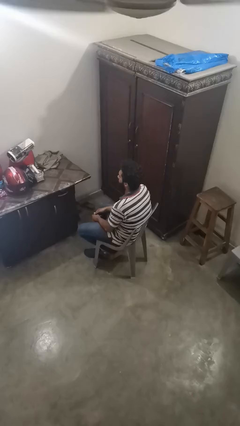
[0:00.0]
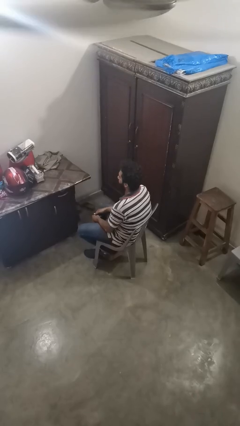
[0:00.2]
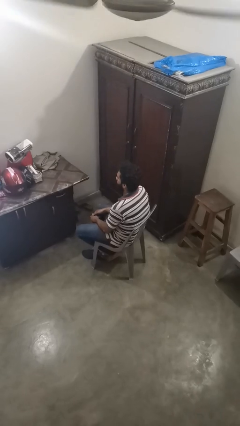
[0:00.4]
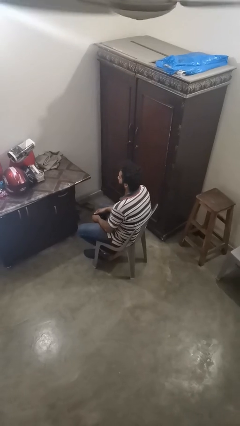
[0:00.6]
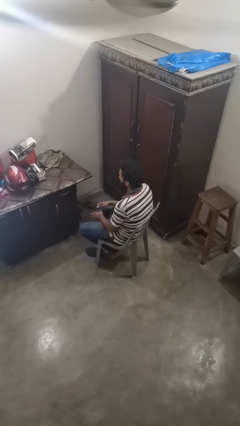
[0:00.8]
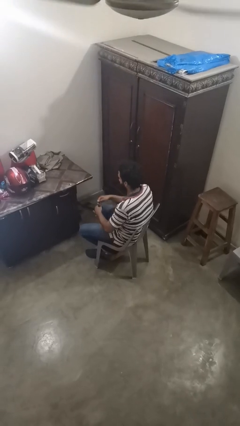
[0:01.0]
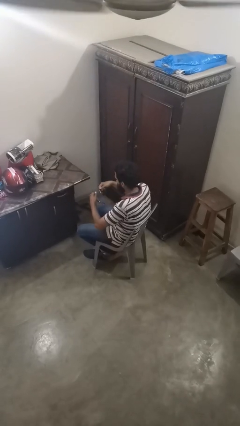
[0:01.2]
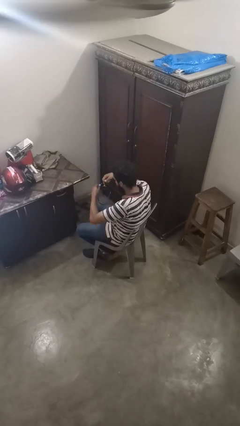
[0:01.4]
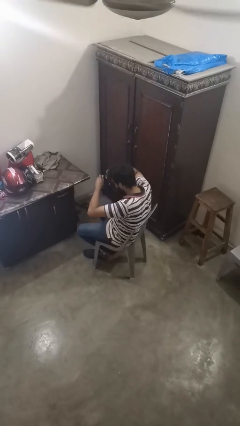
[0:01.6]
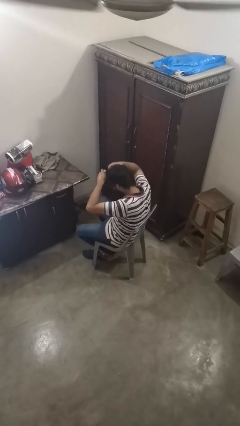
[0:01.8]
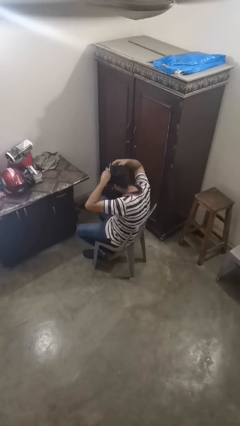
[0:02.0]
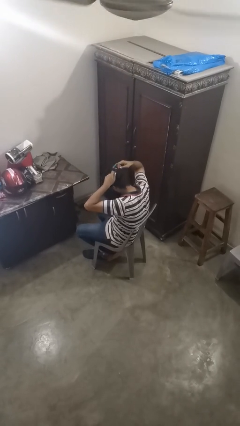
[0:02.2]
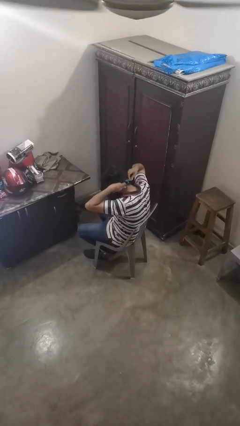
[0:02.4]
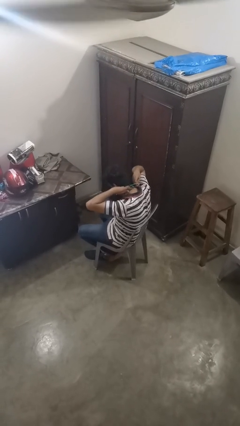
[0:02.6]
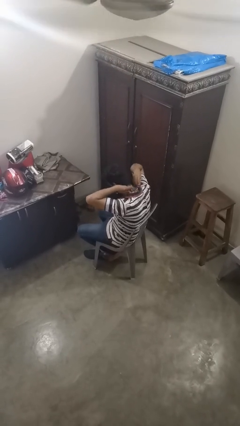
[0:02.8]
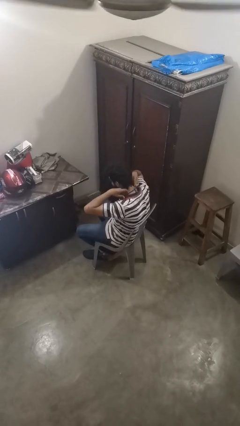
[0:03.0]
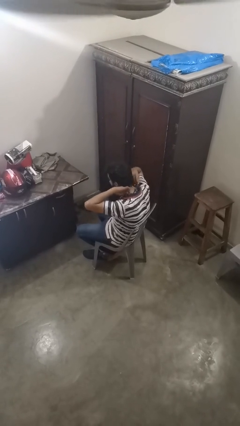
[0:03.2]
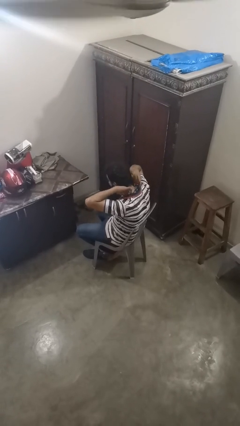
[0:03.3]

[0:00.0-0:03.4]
person puts on necklace

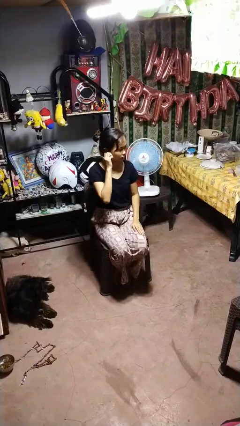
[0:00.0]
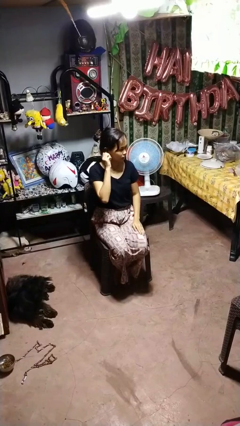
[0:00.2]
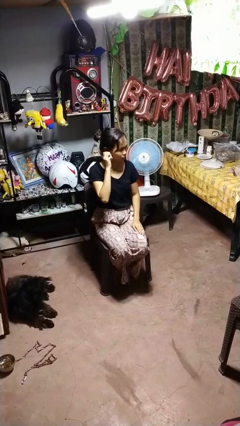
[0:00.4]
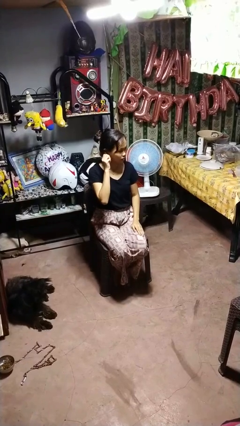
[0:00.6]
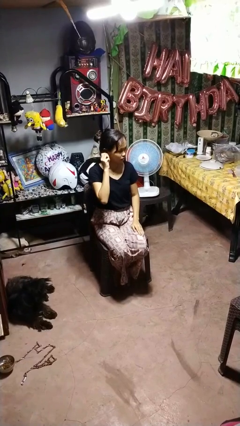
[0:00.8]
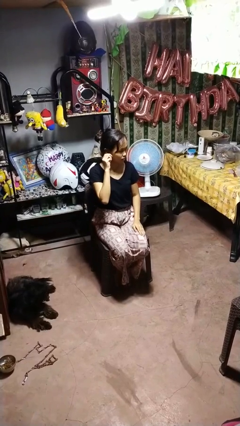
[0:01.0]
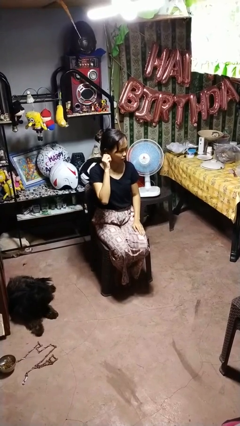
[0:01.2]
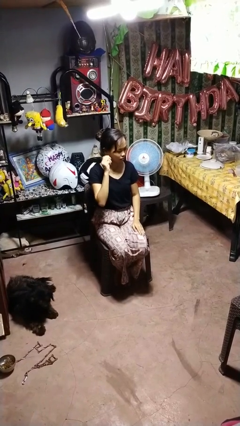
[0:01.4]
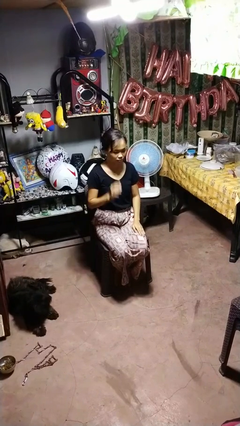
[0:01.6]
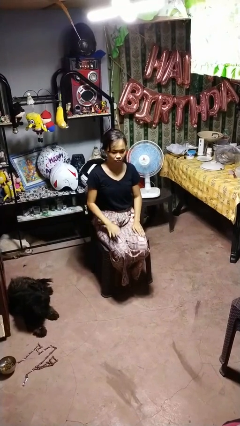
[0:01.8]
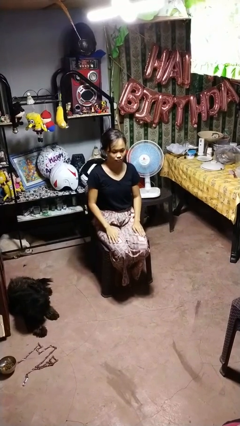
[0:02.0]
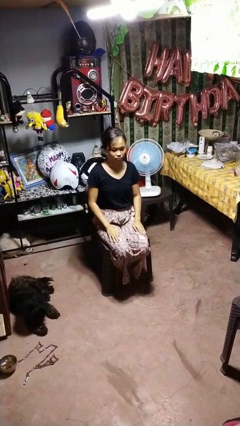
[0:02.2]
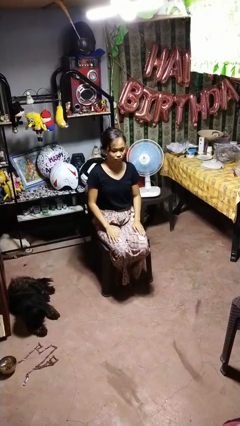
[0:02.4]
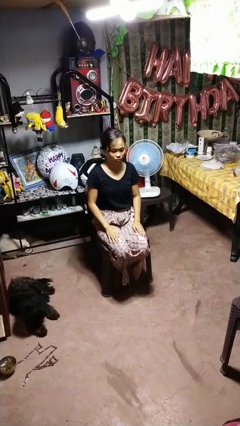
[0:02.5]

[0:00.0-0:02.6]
person touches earlobe

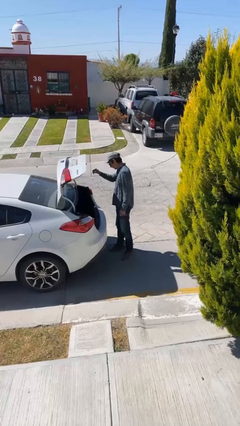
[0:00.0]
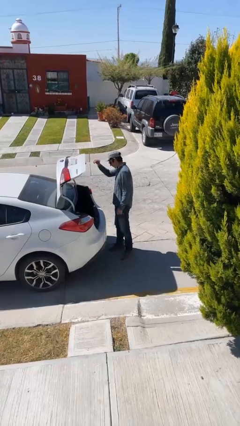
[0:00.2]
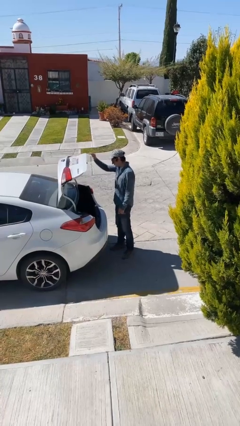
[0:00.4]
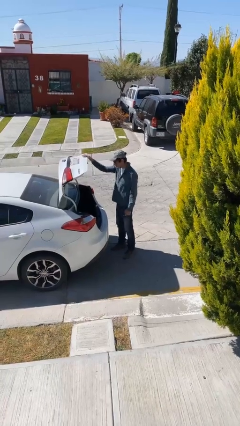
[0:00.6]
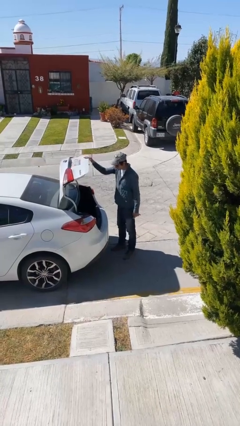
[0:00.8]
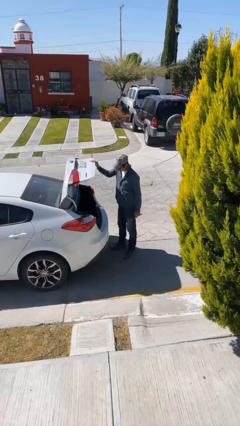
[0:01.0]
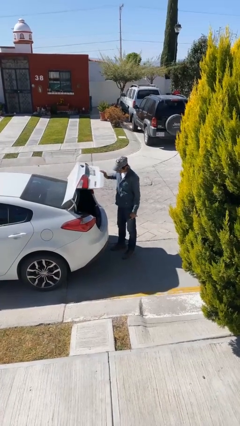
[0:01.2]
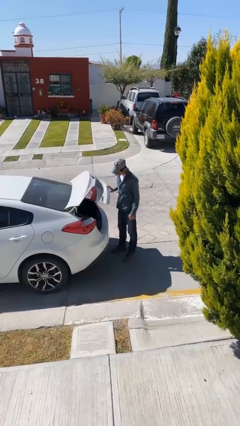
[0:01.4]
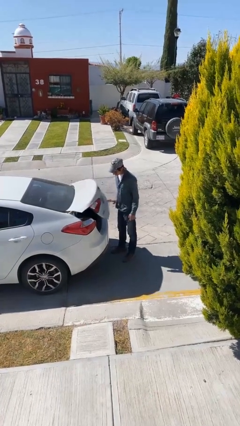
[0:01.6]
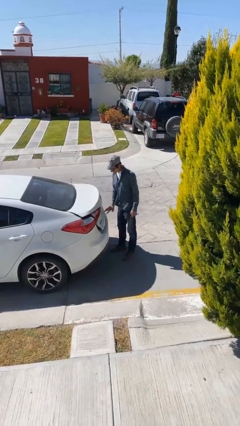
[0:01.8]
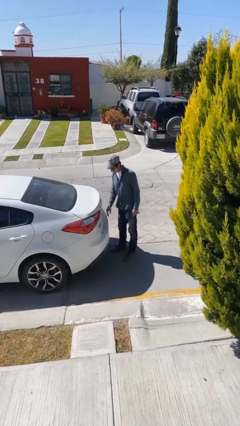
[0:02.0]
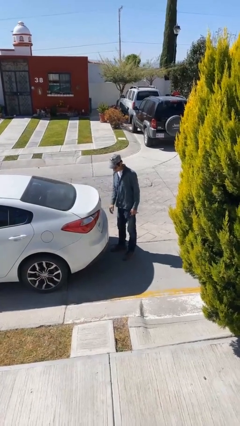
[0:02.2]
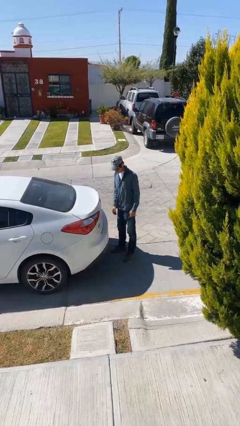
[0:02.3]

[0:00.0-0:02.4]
person closes car trunk

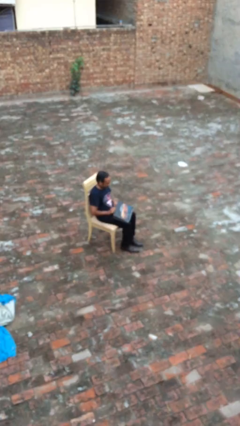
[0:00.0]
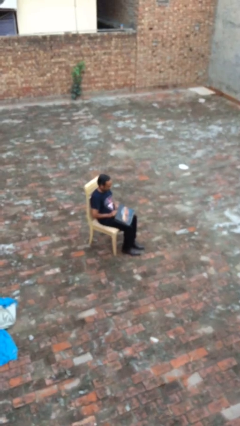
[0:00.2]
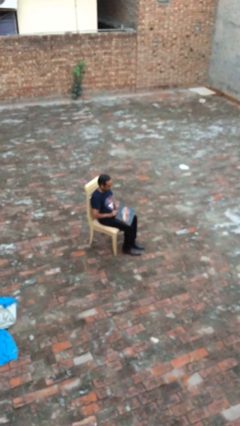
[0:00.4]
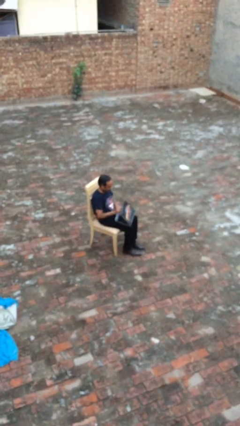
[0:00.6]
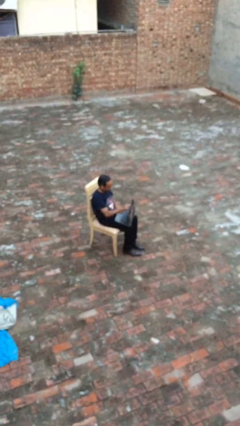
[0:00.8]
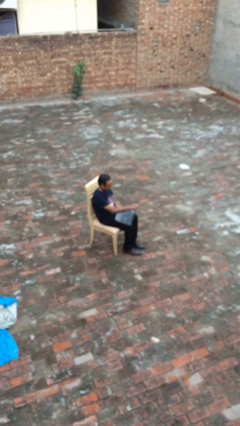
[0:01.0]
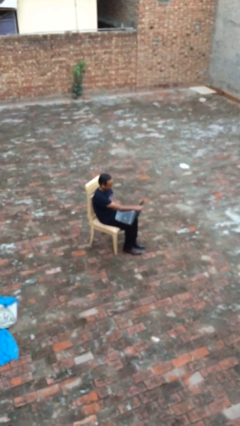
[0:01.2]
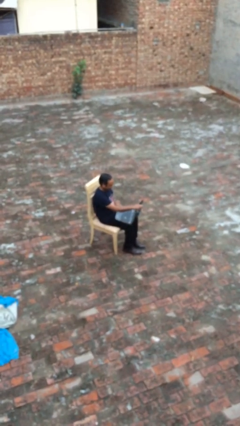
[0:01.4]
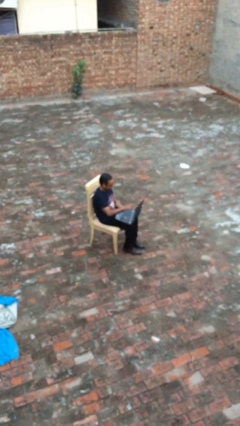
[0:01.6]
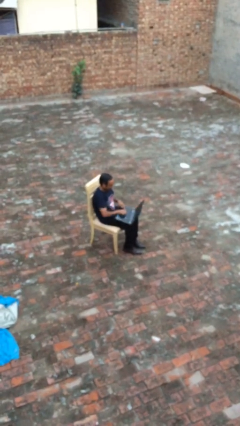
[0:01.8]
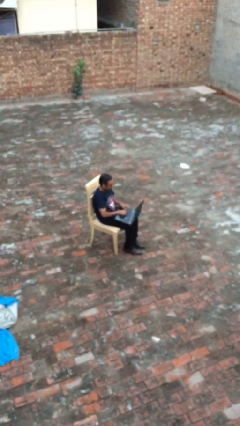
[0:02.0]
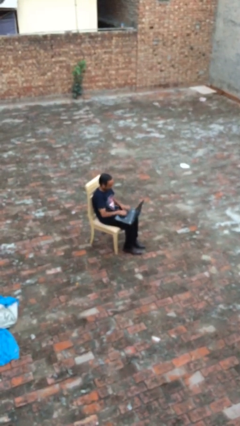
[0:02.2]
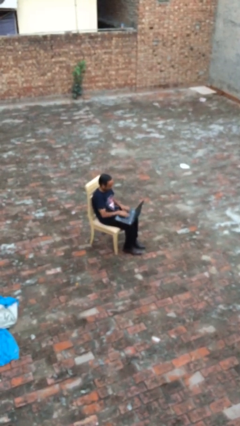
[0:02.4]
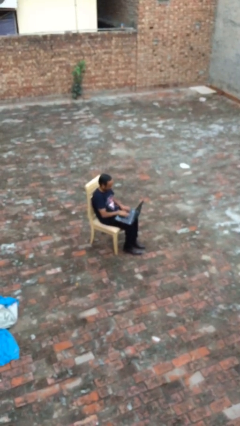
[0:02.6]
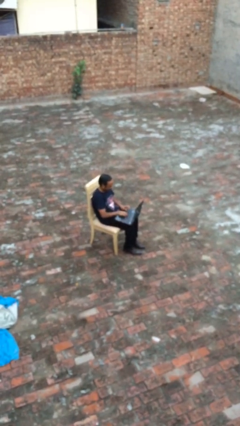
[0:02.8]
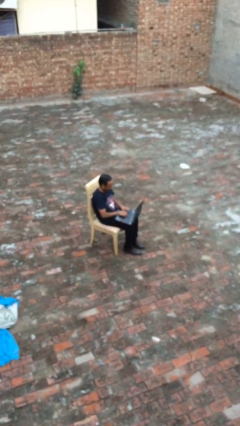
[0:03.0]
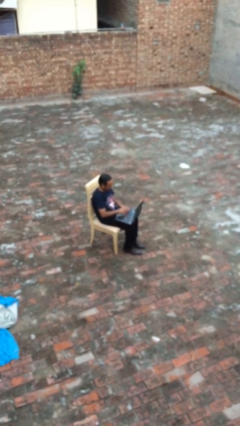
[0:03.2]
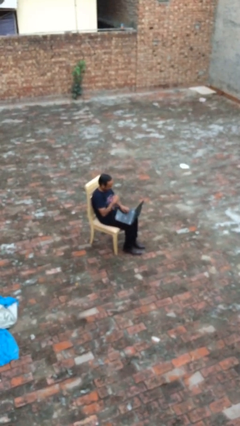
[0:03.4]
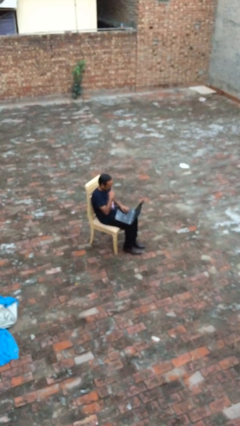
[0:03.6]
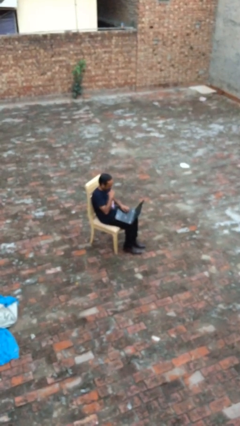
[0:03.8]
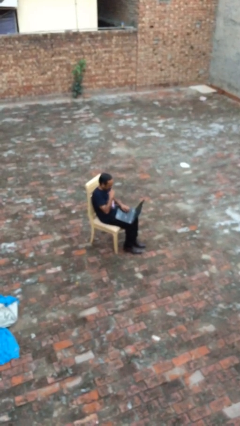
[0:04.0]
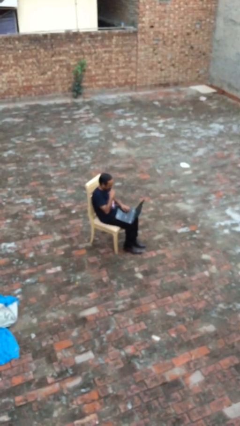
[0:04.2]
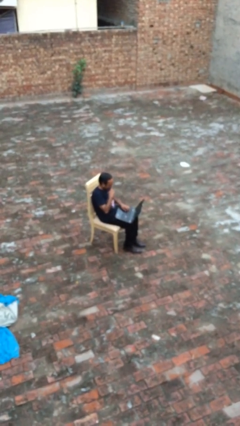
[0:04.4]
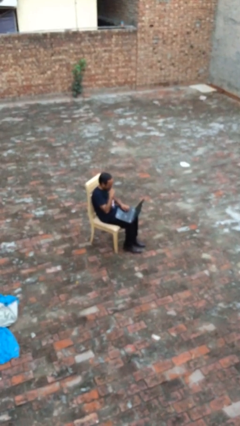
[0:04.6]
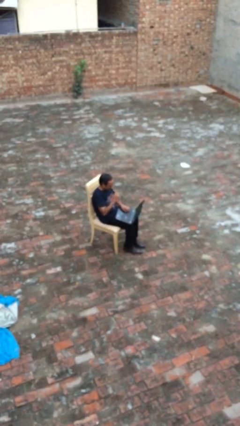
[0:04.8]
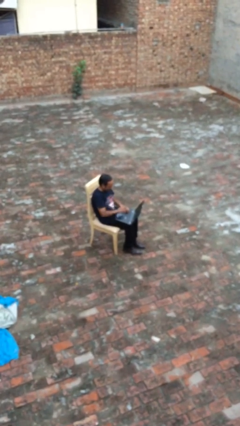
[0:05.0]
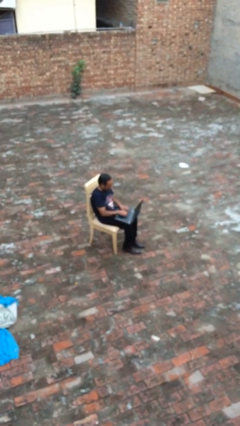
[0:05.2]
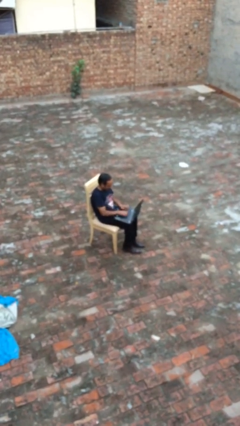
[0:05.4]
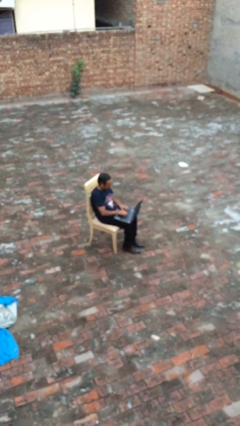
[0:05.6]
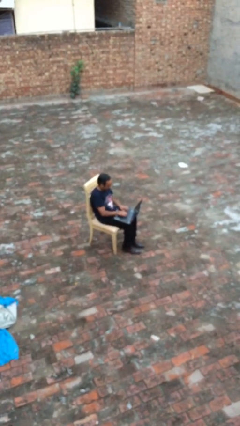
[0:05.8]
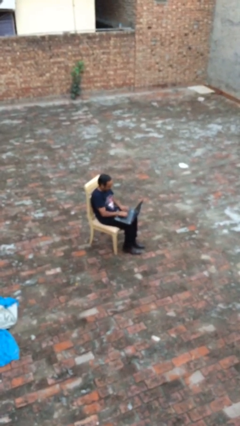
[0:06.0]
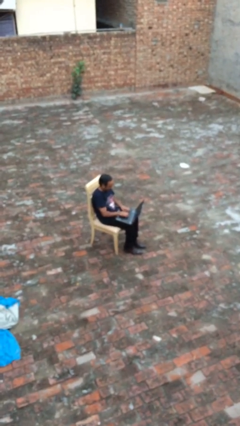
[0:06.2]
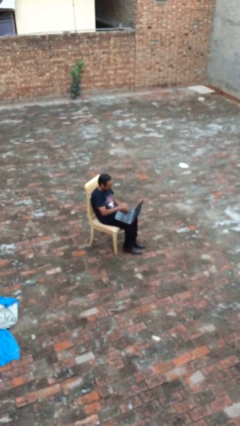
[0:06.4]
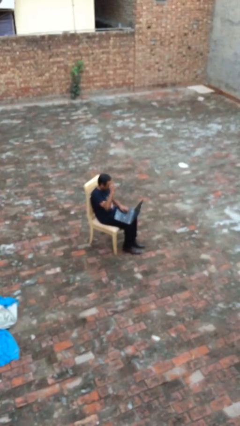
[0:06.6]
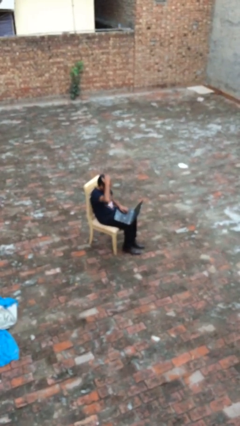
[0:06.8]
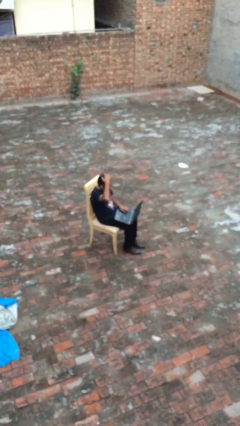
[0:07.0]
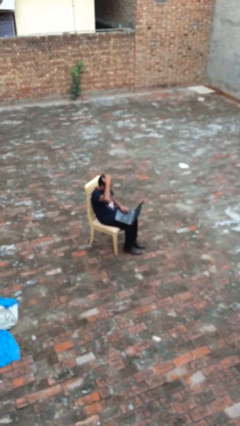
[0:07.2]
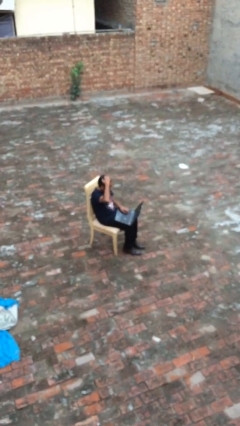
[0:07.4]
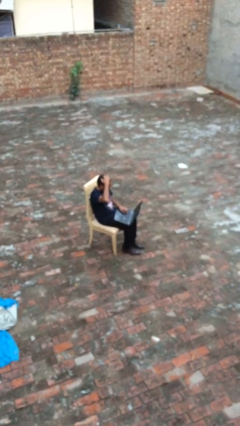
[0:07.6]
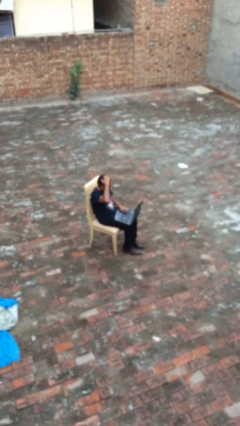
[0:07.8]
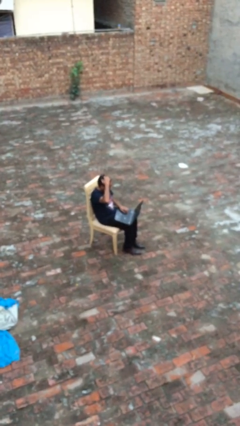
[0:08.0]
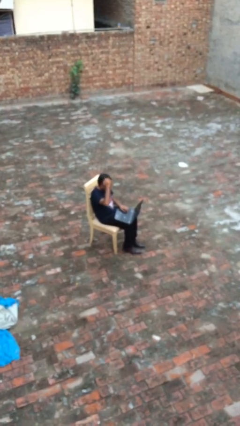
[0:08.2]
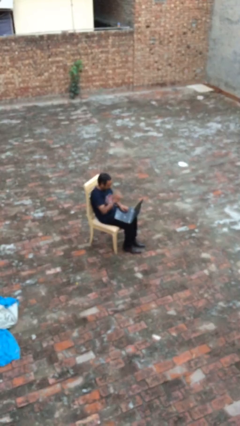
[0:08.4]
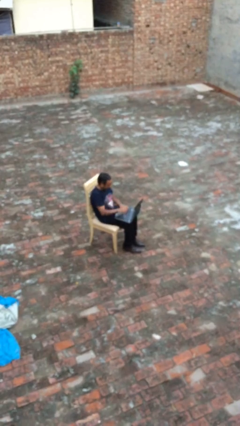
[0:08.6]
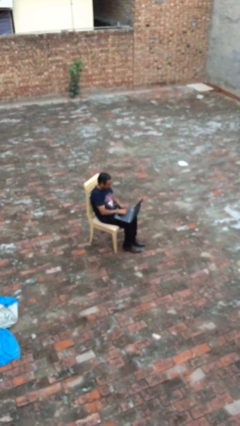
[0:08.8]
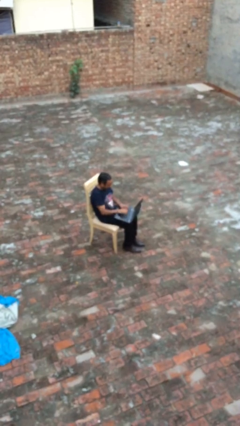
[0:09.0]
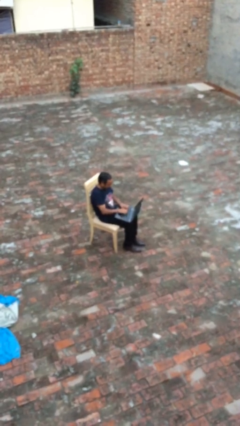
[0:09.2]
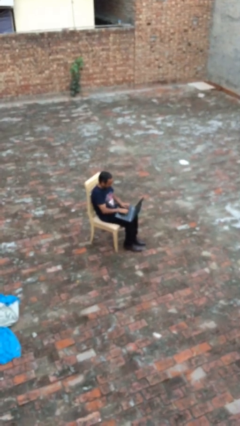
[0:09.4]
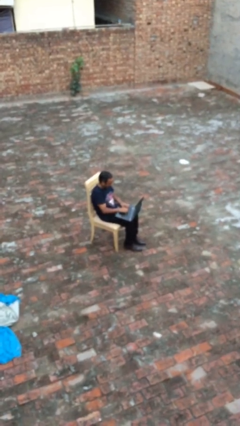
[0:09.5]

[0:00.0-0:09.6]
person interacts with laptop
